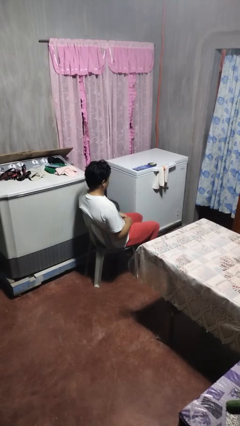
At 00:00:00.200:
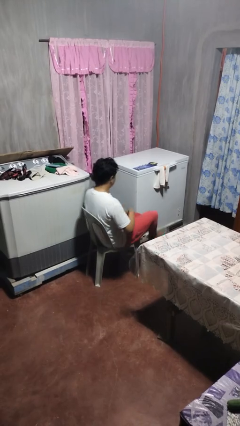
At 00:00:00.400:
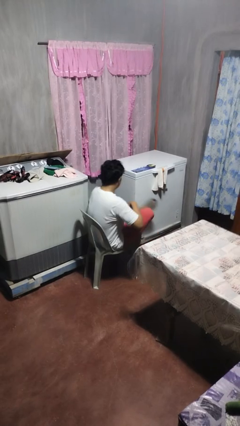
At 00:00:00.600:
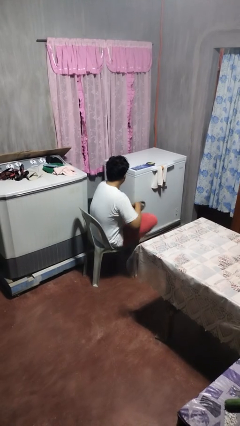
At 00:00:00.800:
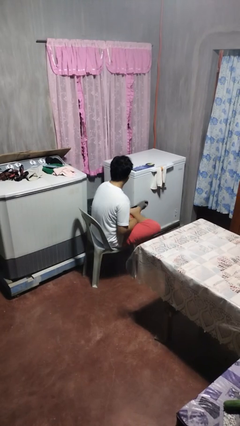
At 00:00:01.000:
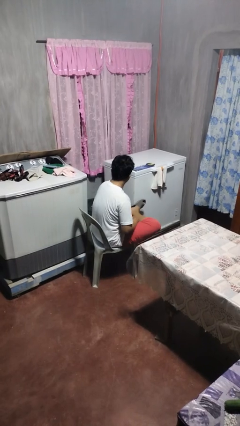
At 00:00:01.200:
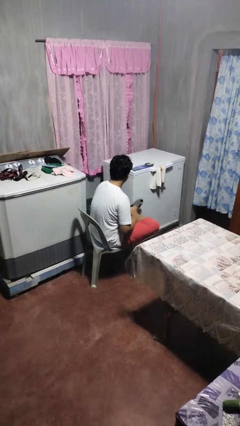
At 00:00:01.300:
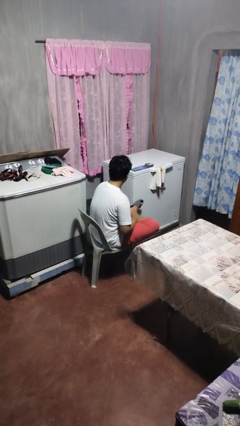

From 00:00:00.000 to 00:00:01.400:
person crosses legs

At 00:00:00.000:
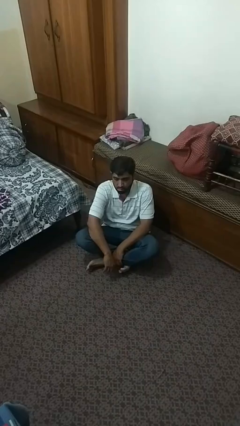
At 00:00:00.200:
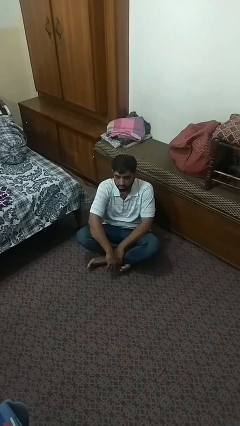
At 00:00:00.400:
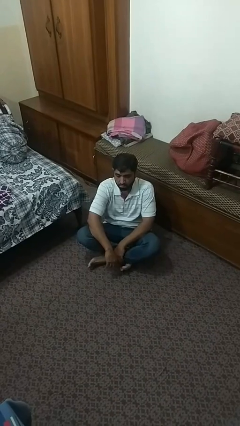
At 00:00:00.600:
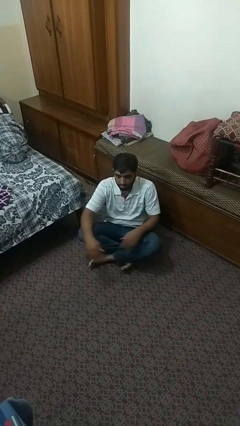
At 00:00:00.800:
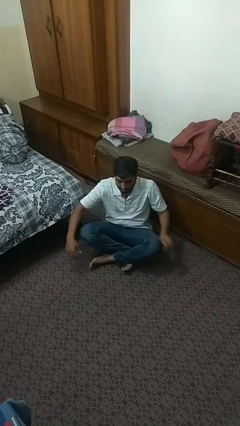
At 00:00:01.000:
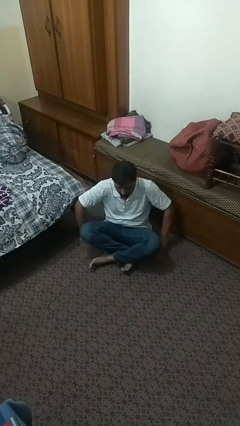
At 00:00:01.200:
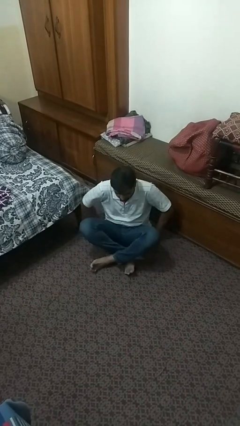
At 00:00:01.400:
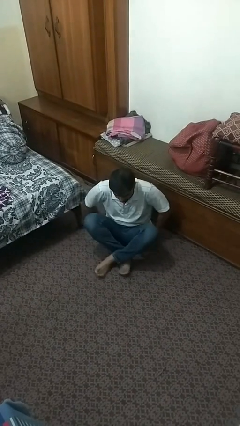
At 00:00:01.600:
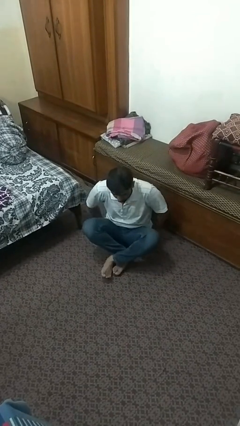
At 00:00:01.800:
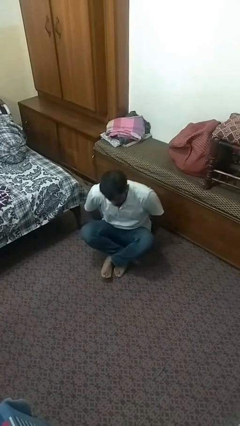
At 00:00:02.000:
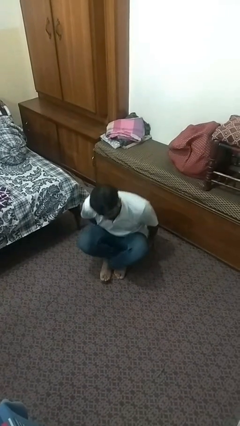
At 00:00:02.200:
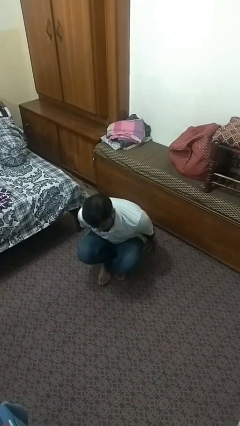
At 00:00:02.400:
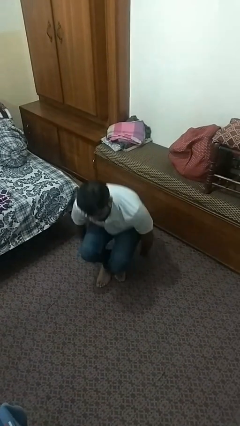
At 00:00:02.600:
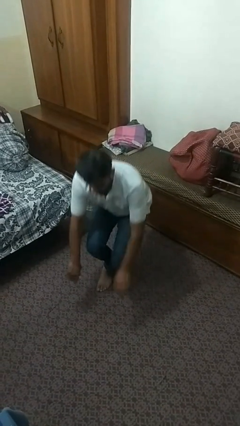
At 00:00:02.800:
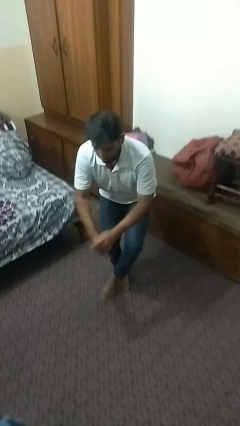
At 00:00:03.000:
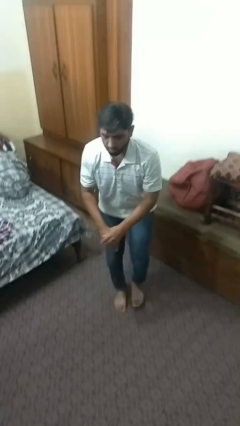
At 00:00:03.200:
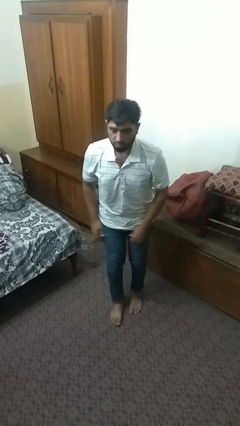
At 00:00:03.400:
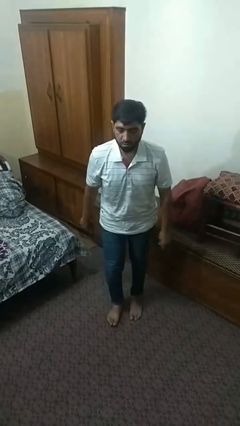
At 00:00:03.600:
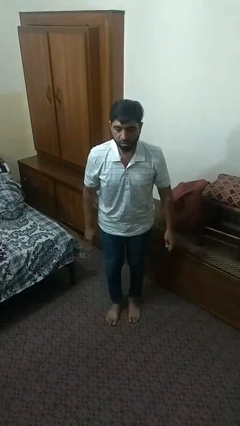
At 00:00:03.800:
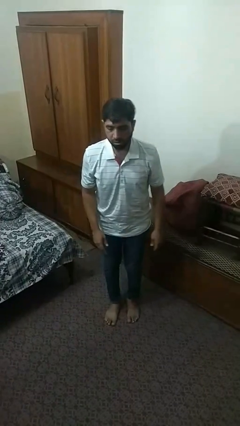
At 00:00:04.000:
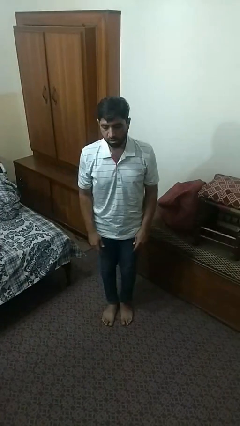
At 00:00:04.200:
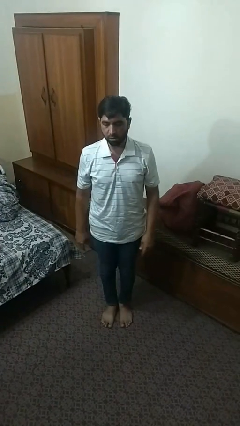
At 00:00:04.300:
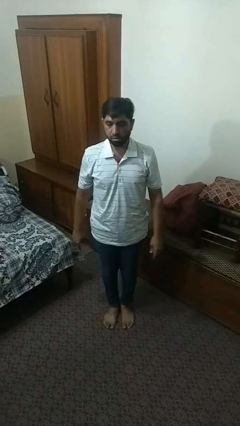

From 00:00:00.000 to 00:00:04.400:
person stands up from floor

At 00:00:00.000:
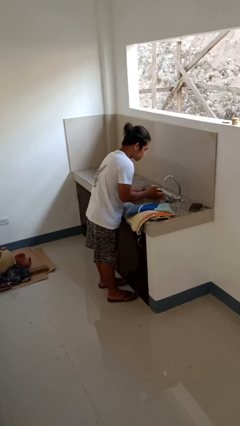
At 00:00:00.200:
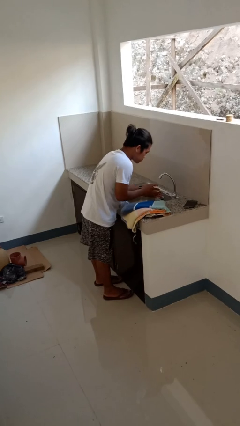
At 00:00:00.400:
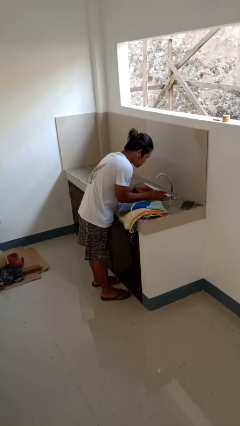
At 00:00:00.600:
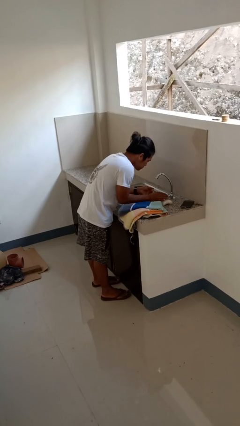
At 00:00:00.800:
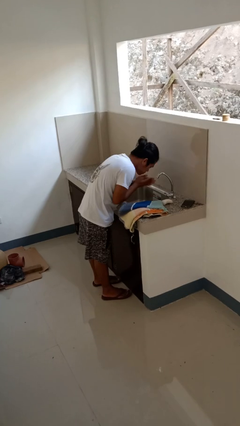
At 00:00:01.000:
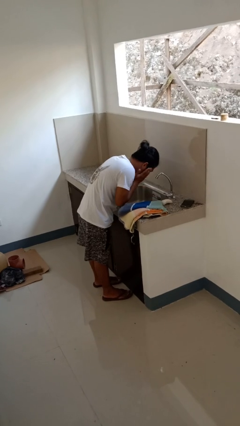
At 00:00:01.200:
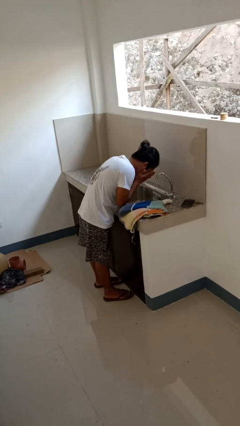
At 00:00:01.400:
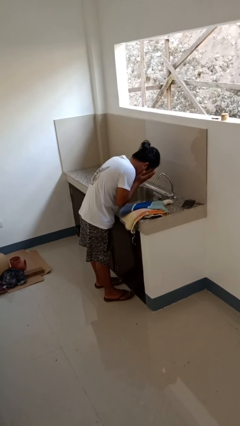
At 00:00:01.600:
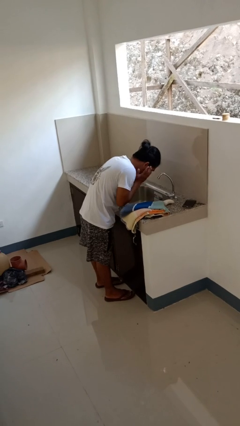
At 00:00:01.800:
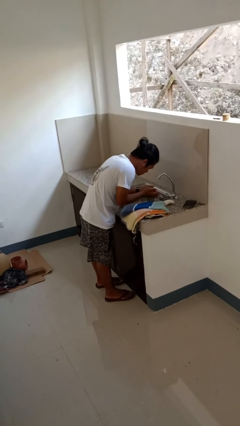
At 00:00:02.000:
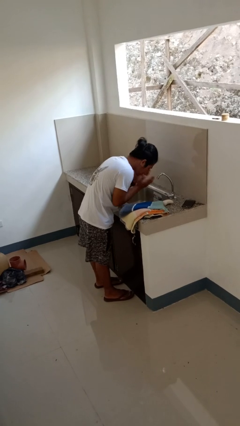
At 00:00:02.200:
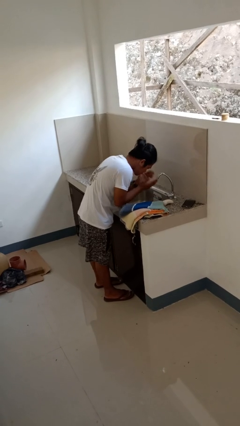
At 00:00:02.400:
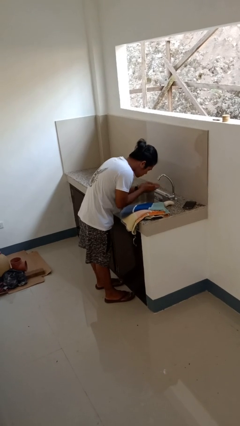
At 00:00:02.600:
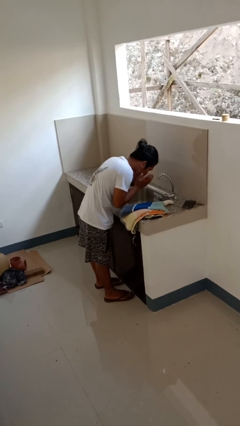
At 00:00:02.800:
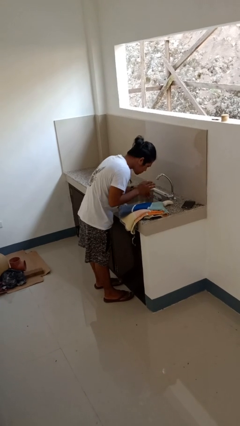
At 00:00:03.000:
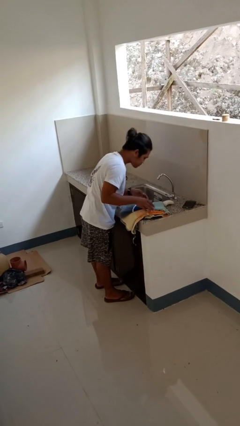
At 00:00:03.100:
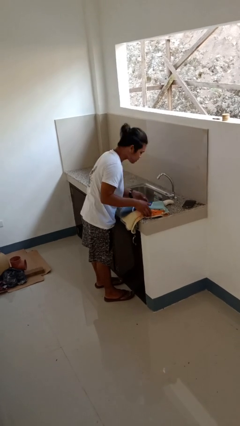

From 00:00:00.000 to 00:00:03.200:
person washes face

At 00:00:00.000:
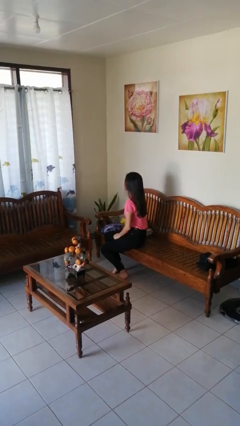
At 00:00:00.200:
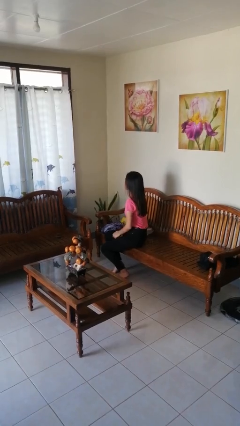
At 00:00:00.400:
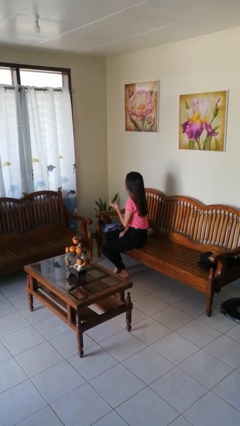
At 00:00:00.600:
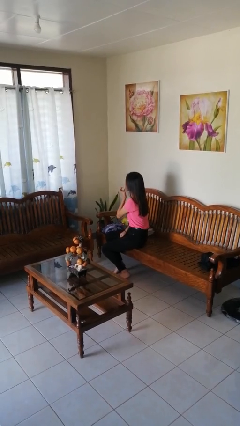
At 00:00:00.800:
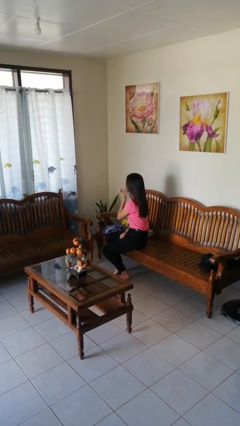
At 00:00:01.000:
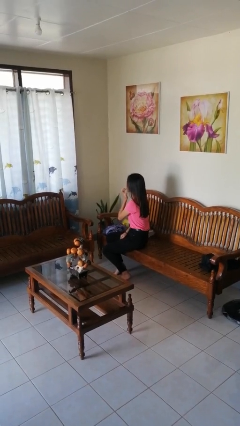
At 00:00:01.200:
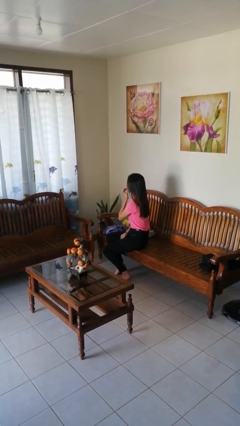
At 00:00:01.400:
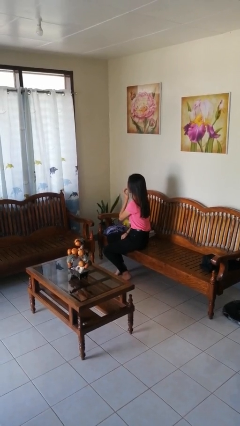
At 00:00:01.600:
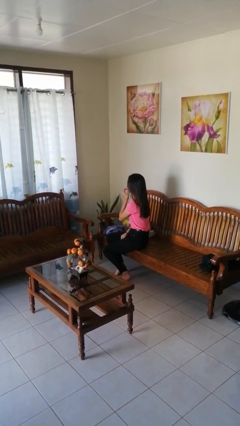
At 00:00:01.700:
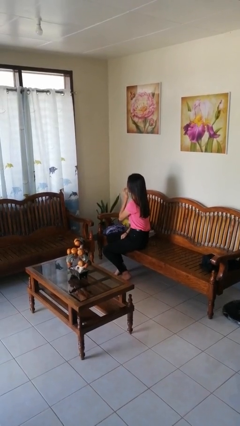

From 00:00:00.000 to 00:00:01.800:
person licks fingers

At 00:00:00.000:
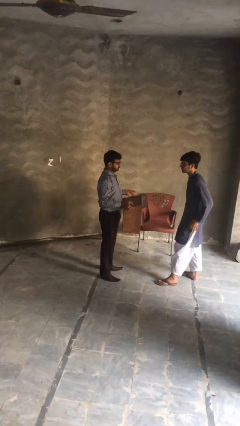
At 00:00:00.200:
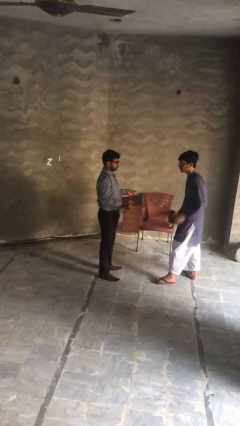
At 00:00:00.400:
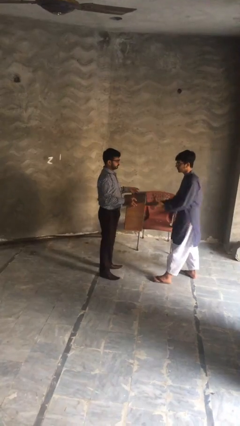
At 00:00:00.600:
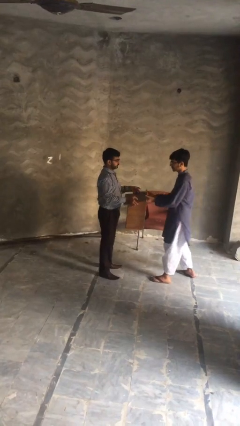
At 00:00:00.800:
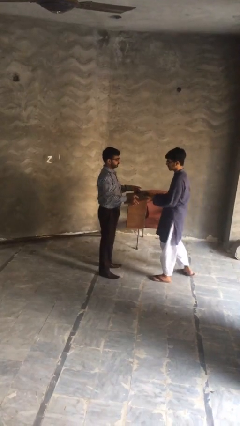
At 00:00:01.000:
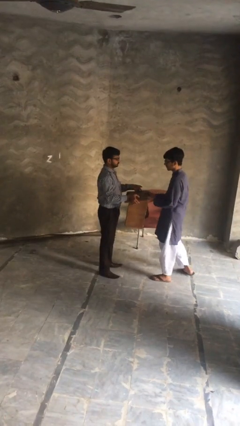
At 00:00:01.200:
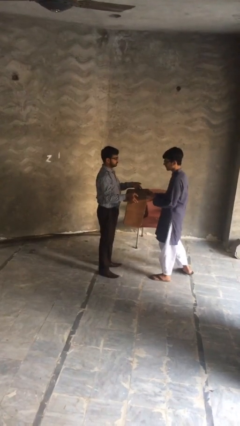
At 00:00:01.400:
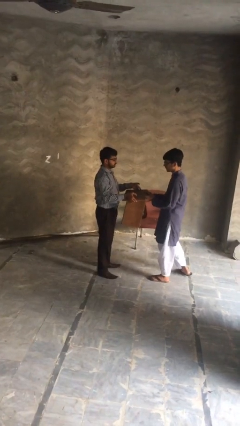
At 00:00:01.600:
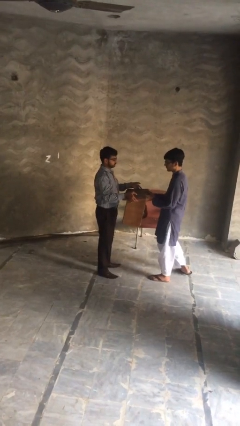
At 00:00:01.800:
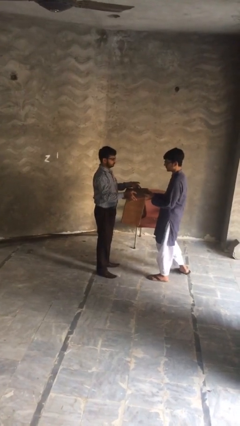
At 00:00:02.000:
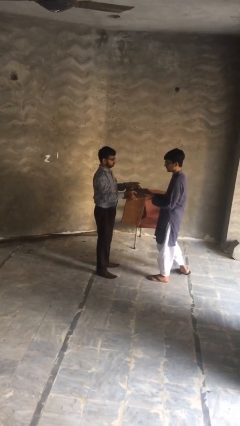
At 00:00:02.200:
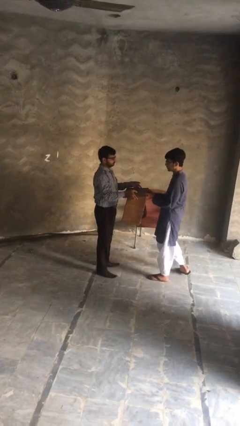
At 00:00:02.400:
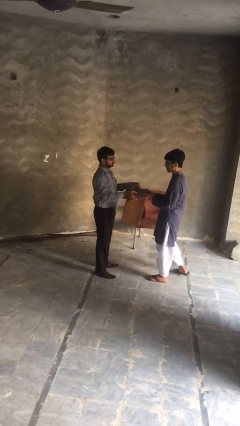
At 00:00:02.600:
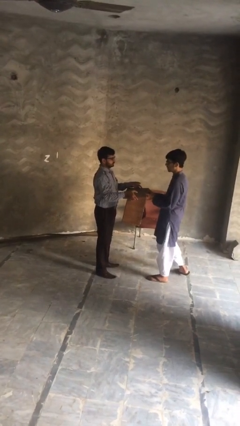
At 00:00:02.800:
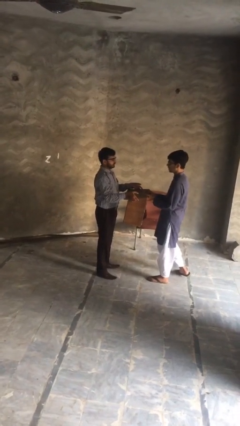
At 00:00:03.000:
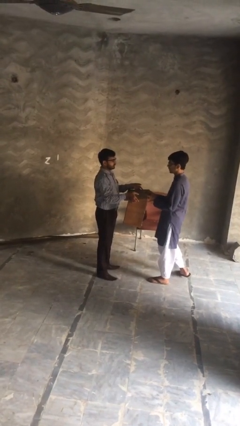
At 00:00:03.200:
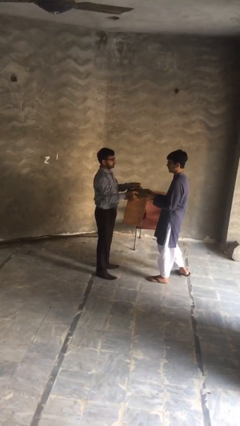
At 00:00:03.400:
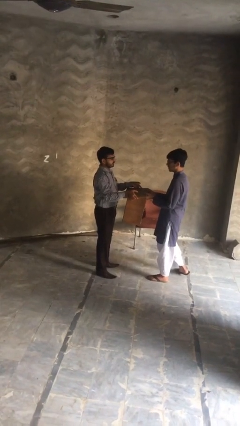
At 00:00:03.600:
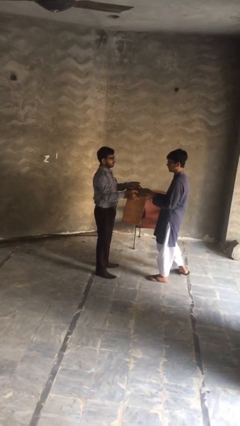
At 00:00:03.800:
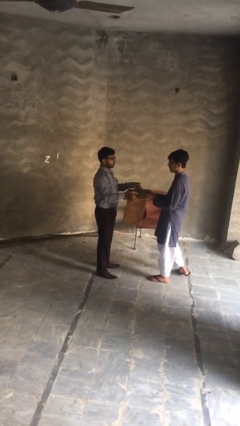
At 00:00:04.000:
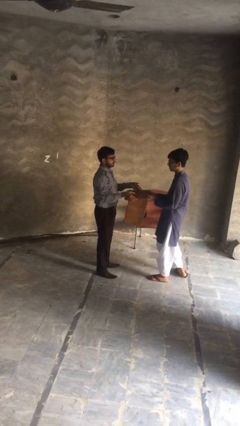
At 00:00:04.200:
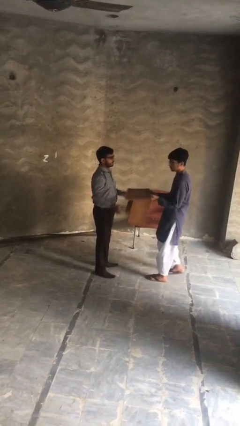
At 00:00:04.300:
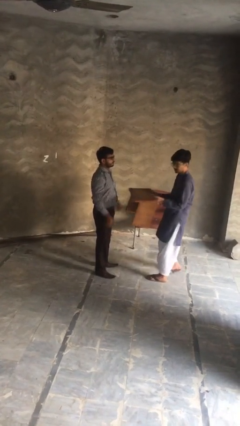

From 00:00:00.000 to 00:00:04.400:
person transfers object to person

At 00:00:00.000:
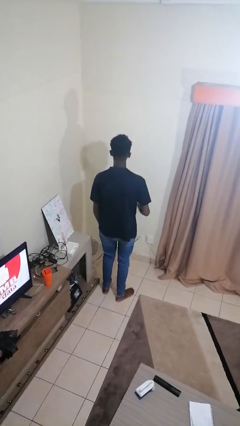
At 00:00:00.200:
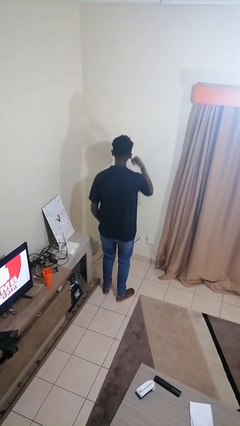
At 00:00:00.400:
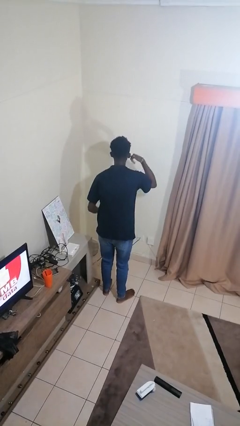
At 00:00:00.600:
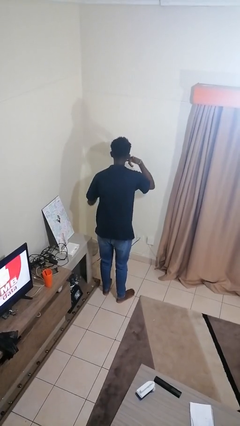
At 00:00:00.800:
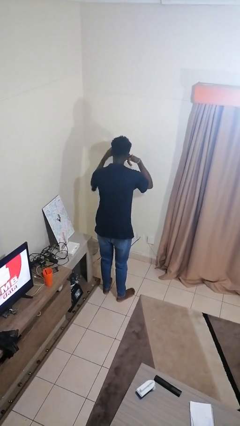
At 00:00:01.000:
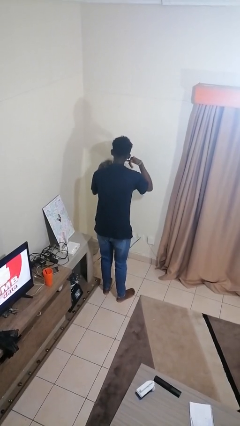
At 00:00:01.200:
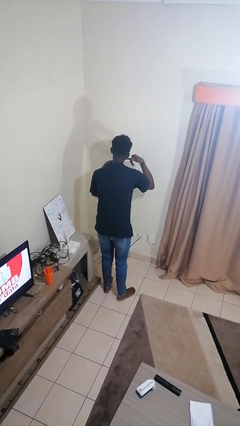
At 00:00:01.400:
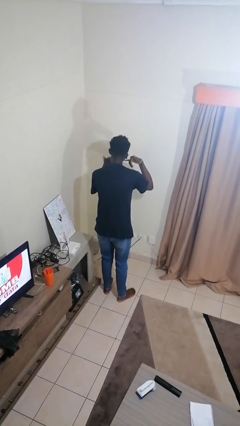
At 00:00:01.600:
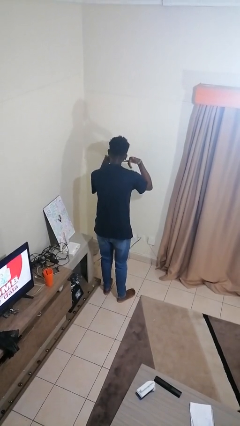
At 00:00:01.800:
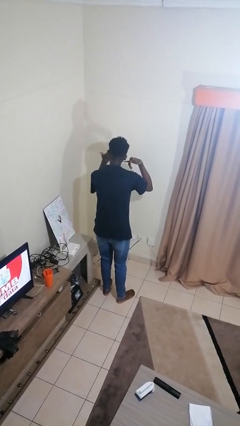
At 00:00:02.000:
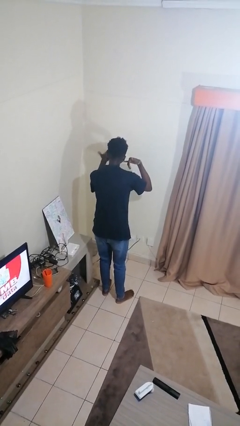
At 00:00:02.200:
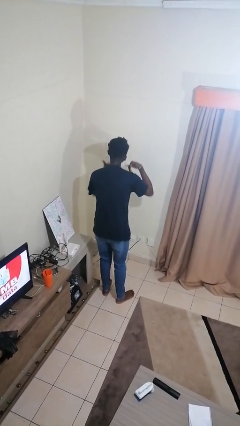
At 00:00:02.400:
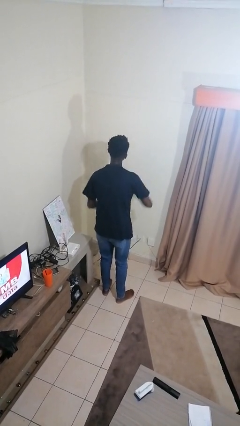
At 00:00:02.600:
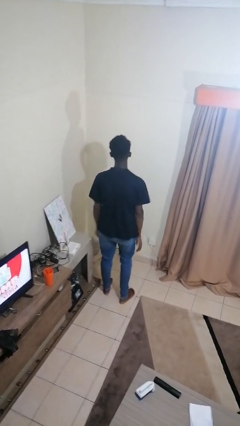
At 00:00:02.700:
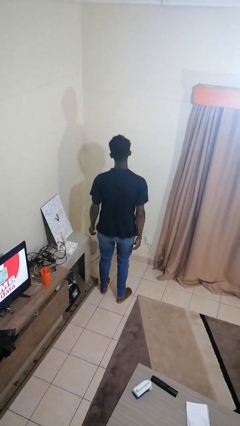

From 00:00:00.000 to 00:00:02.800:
person gestures call me
